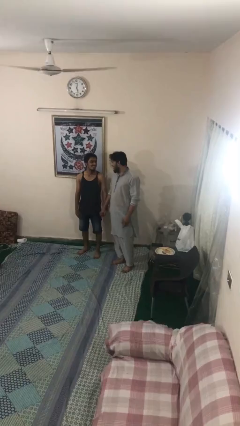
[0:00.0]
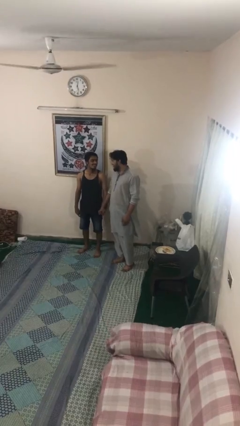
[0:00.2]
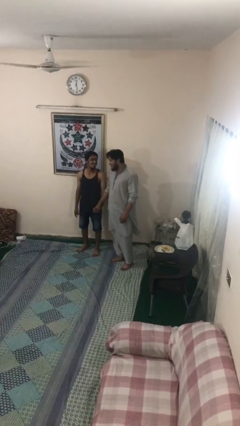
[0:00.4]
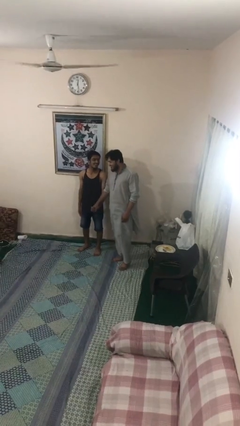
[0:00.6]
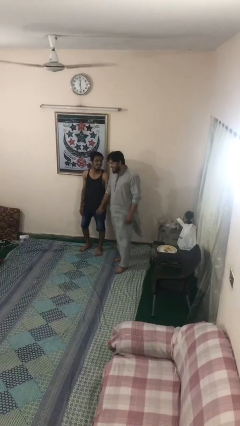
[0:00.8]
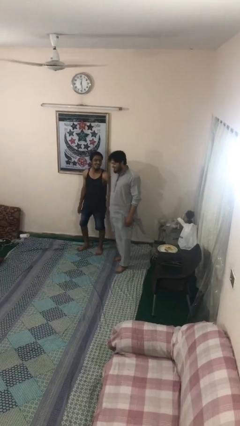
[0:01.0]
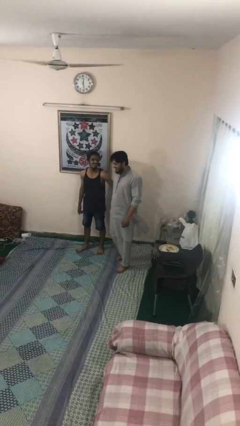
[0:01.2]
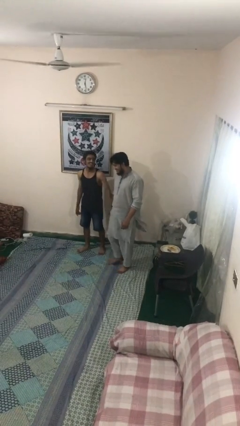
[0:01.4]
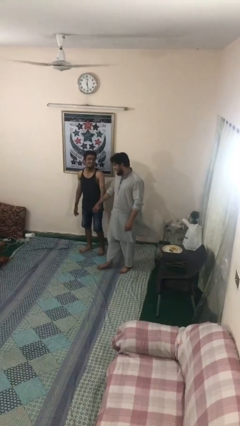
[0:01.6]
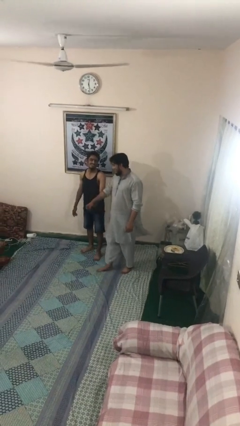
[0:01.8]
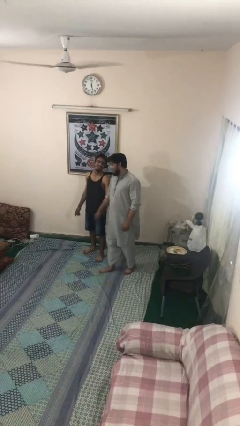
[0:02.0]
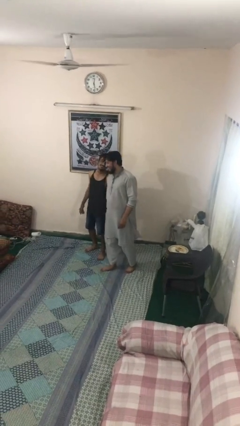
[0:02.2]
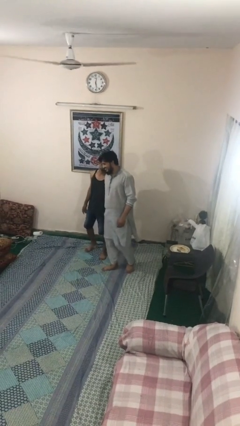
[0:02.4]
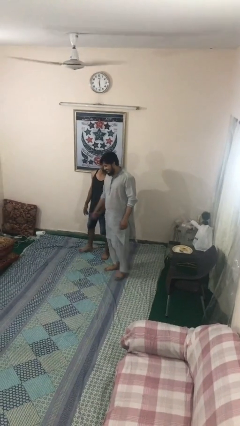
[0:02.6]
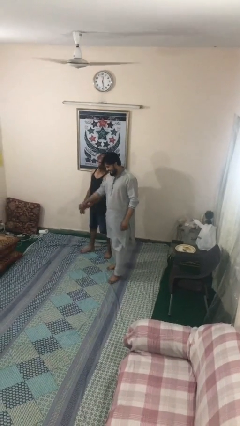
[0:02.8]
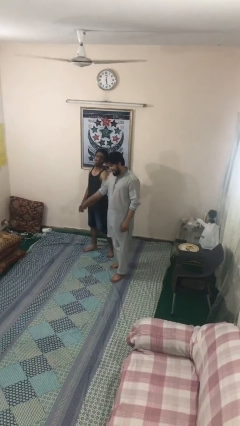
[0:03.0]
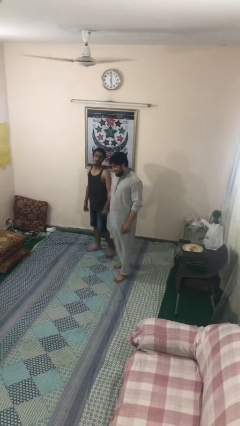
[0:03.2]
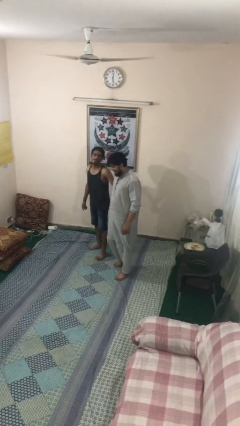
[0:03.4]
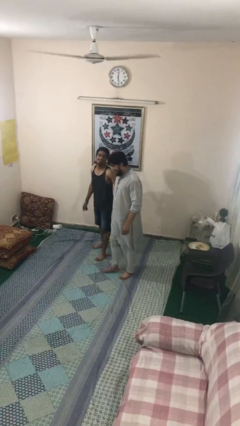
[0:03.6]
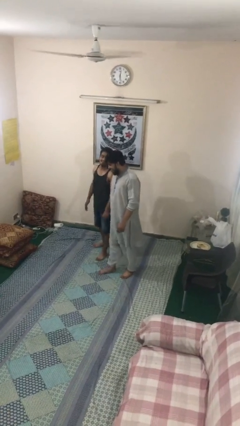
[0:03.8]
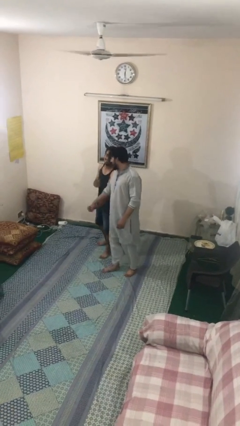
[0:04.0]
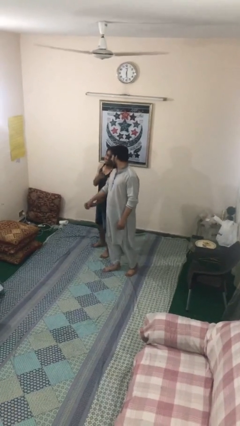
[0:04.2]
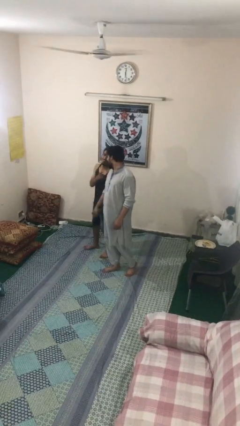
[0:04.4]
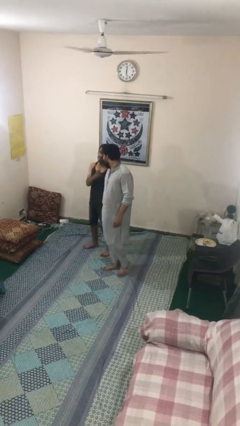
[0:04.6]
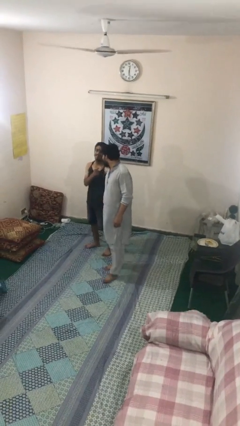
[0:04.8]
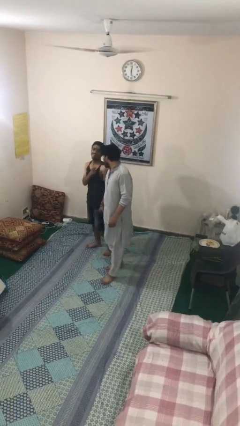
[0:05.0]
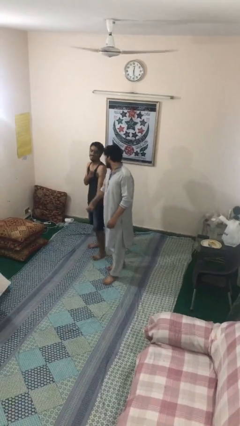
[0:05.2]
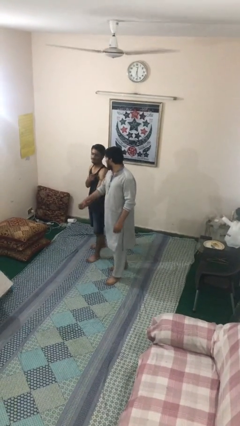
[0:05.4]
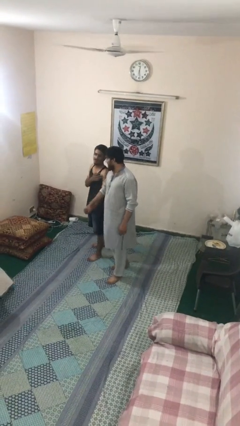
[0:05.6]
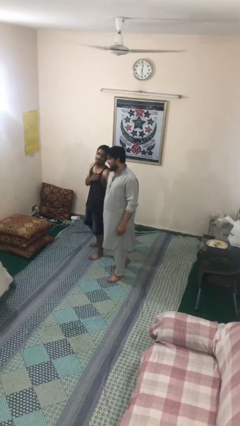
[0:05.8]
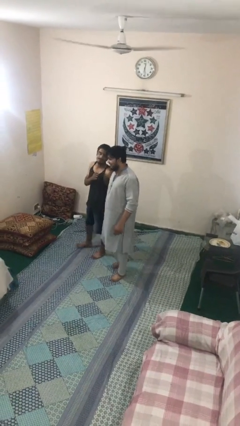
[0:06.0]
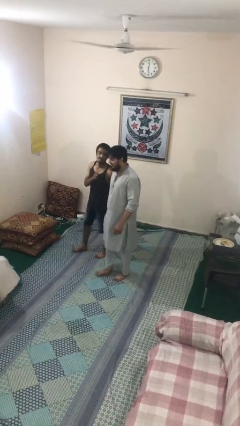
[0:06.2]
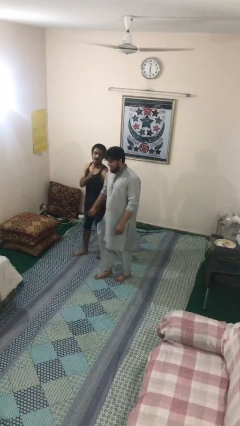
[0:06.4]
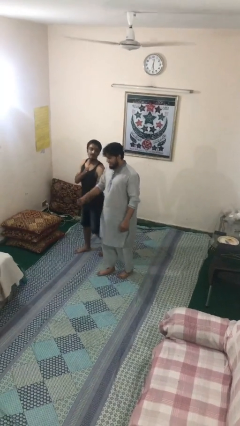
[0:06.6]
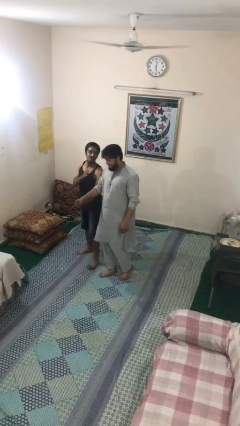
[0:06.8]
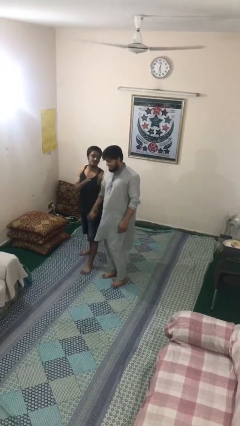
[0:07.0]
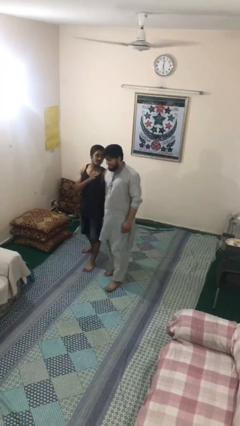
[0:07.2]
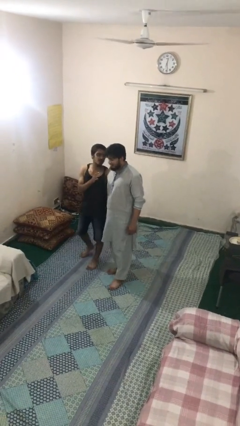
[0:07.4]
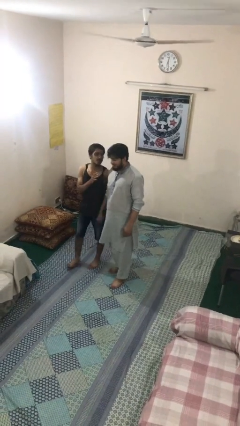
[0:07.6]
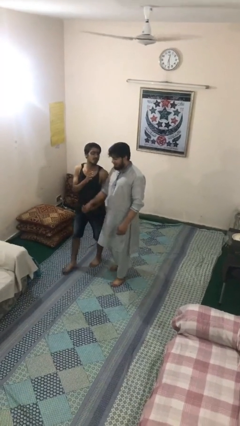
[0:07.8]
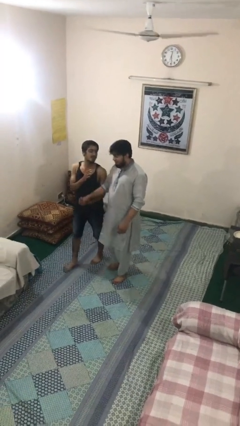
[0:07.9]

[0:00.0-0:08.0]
person holds hand

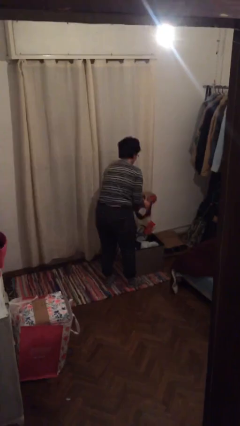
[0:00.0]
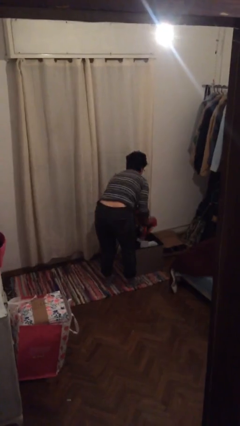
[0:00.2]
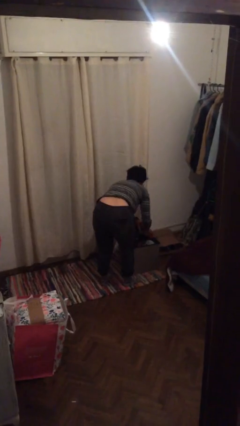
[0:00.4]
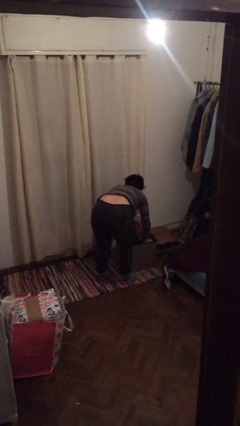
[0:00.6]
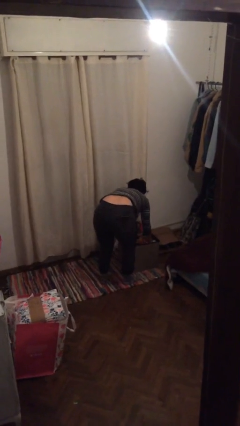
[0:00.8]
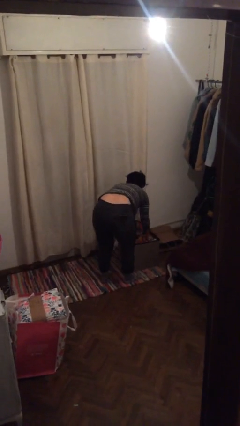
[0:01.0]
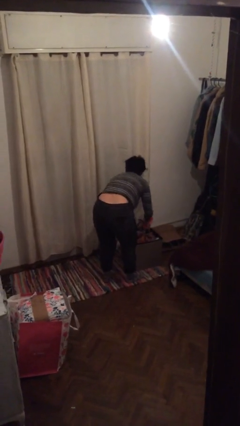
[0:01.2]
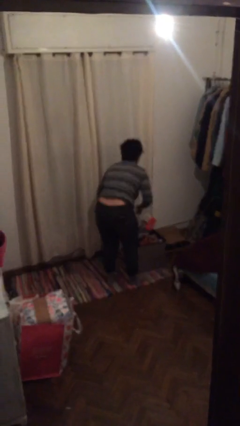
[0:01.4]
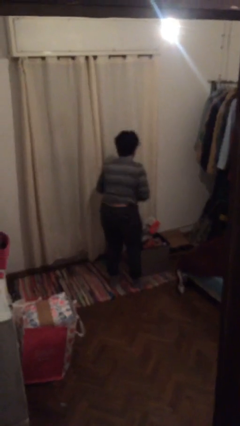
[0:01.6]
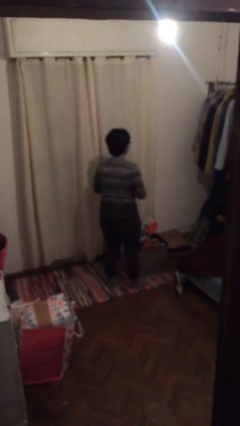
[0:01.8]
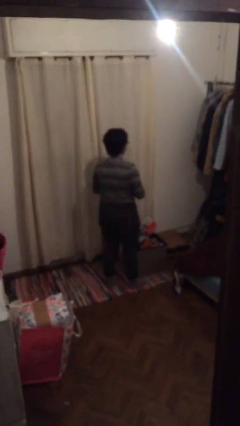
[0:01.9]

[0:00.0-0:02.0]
person puts object into basket

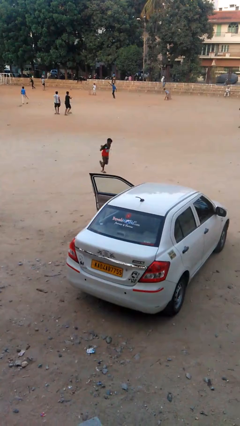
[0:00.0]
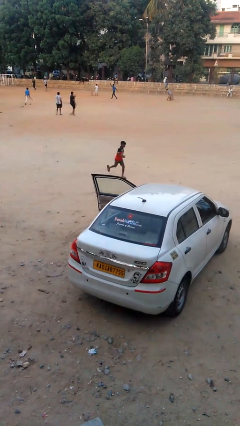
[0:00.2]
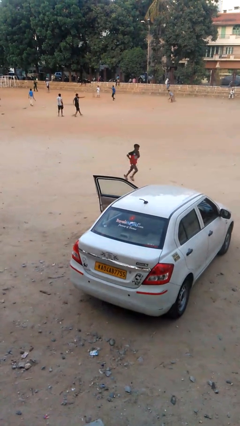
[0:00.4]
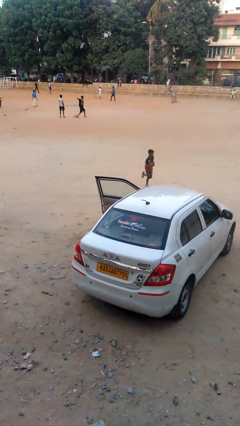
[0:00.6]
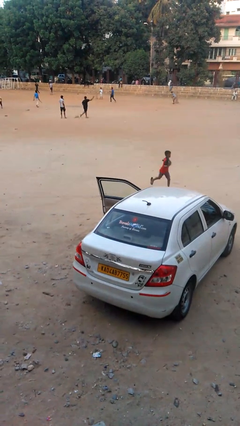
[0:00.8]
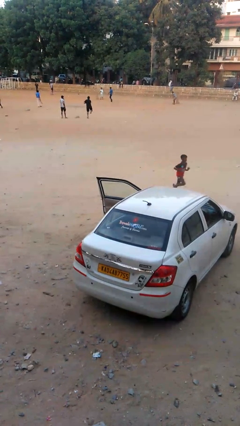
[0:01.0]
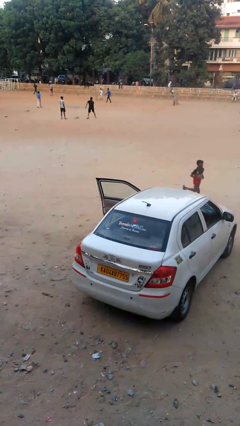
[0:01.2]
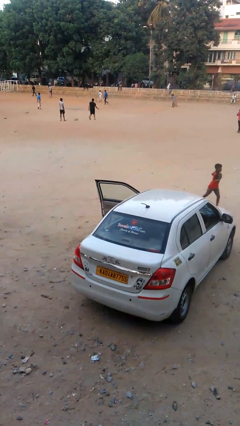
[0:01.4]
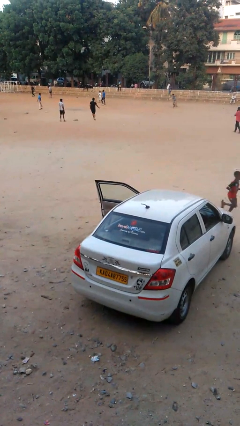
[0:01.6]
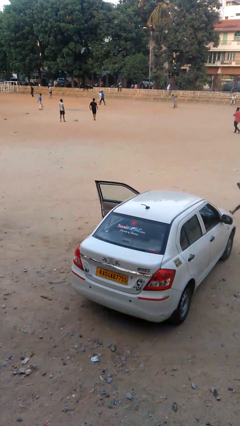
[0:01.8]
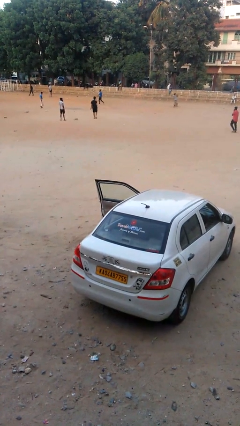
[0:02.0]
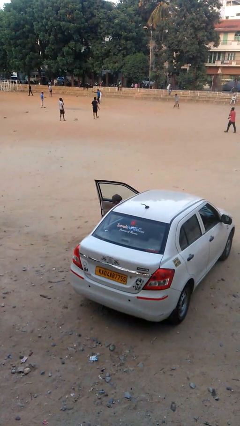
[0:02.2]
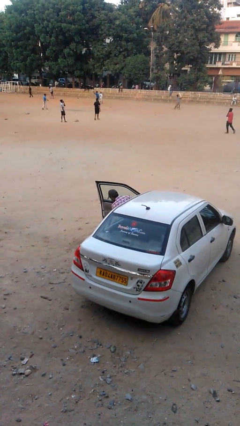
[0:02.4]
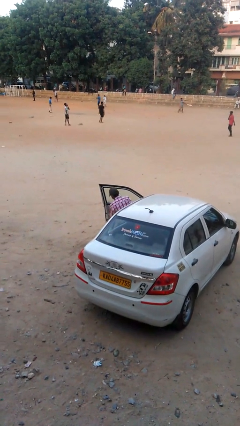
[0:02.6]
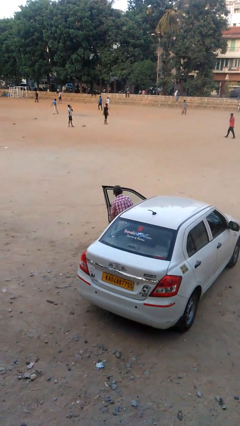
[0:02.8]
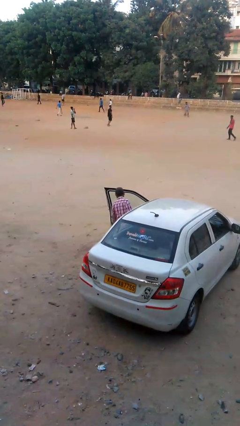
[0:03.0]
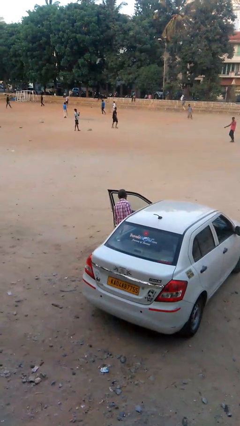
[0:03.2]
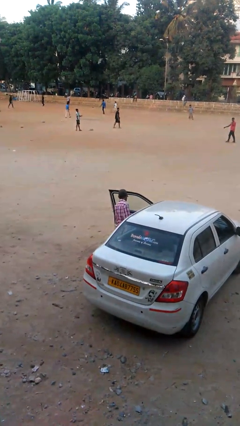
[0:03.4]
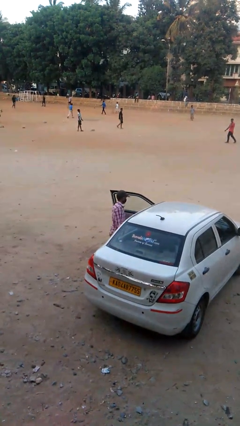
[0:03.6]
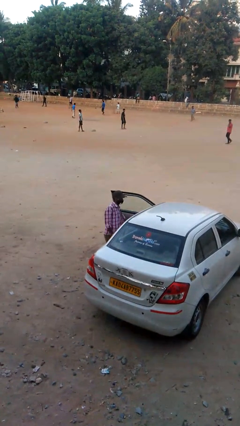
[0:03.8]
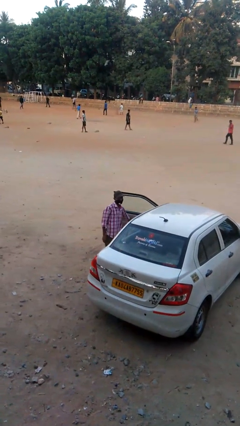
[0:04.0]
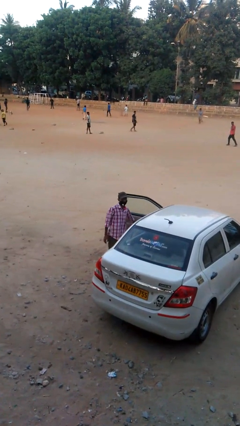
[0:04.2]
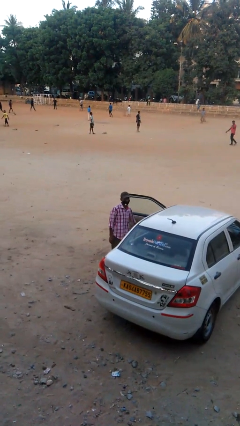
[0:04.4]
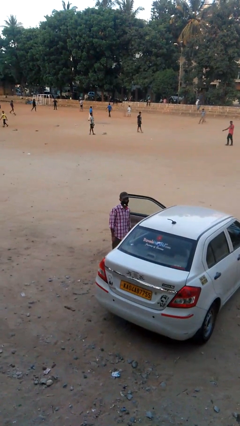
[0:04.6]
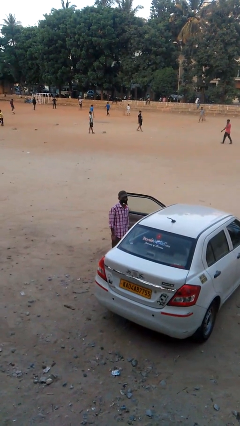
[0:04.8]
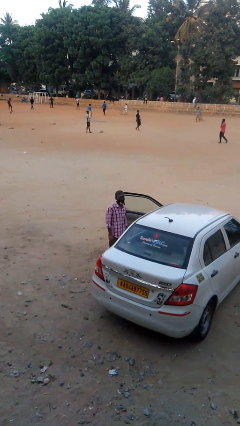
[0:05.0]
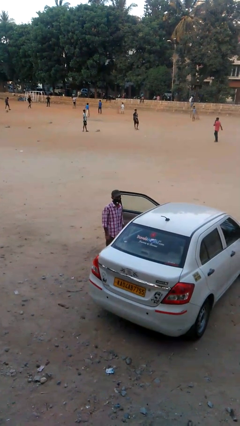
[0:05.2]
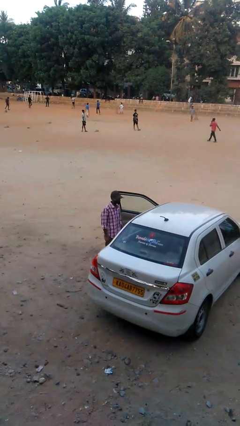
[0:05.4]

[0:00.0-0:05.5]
person exits car

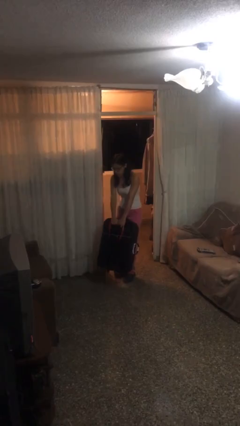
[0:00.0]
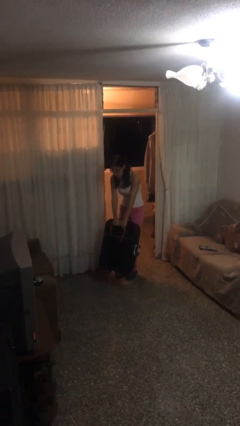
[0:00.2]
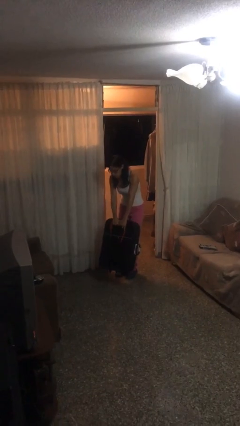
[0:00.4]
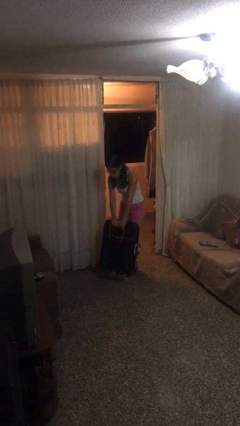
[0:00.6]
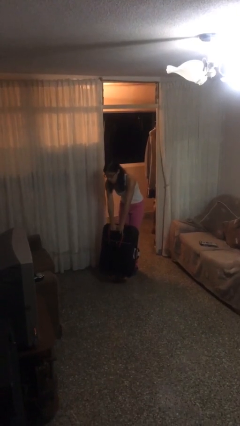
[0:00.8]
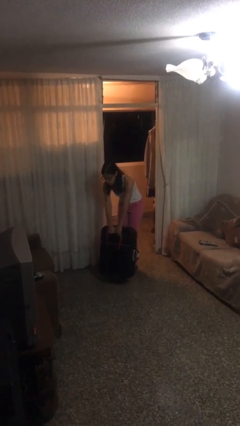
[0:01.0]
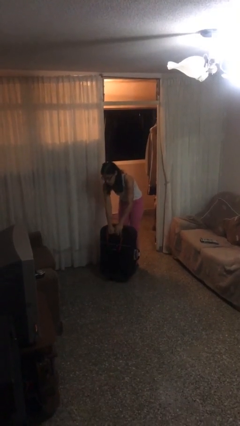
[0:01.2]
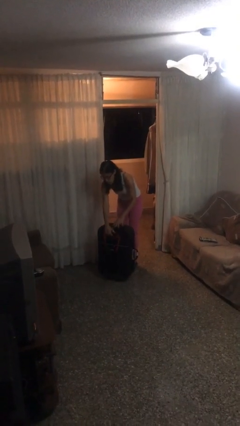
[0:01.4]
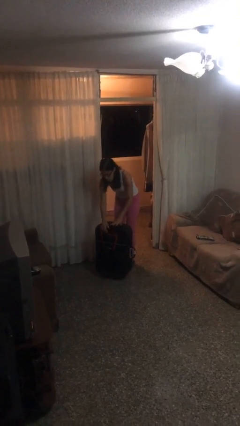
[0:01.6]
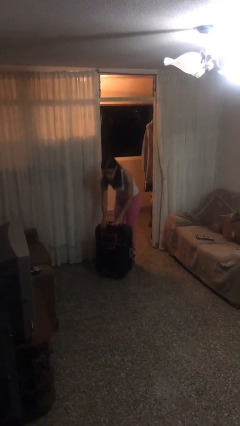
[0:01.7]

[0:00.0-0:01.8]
person puts down object on floor

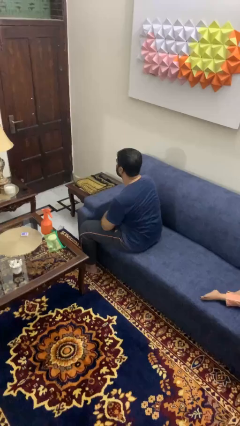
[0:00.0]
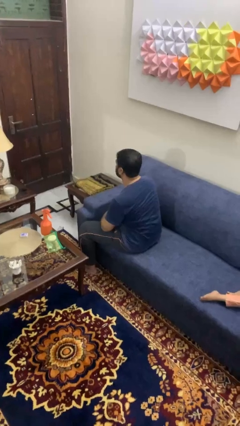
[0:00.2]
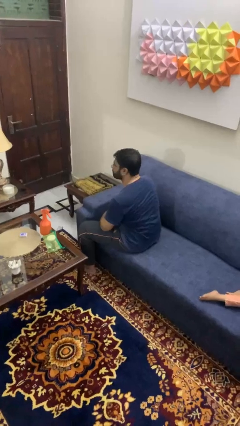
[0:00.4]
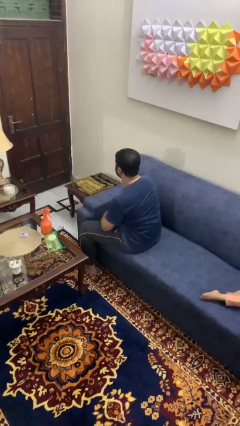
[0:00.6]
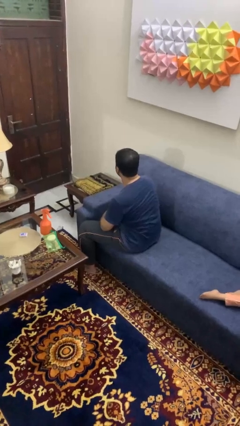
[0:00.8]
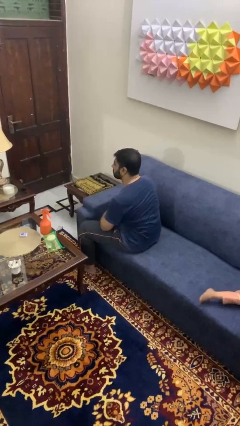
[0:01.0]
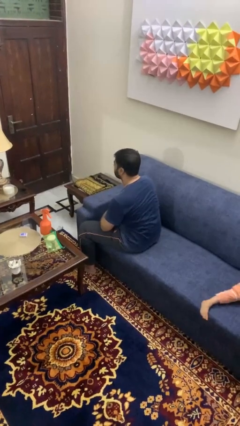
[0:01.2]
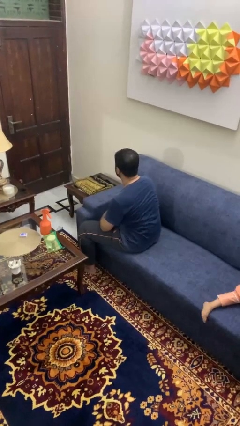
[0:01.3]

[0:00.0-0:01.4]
person shakes head
